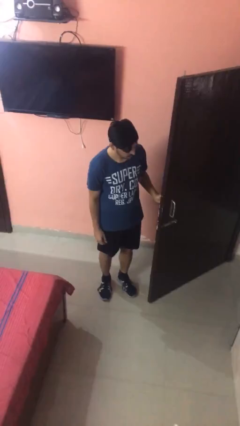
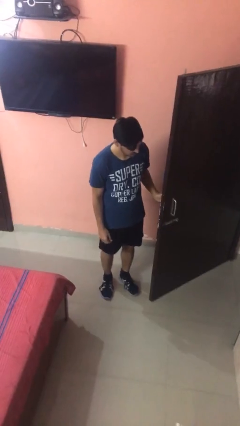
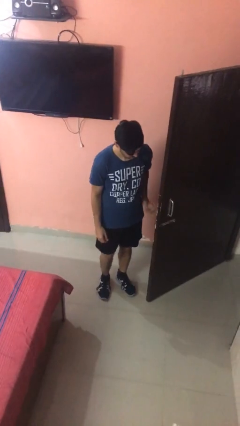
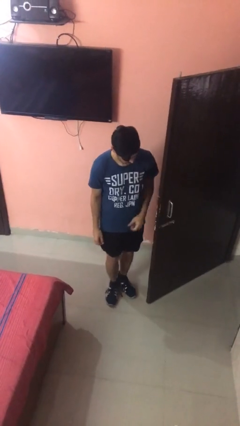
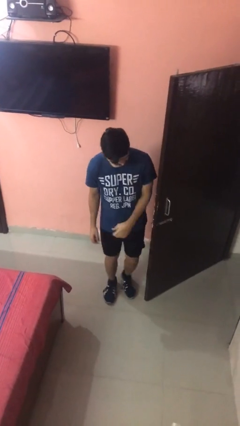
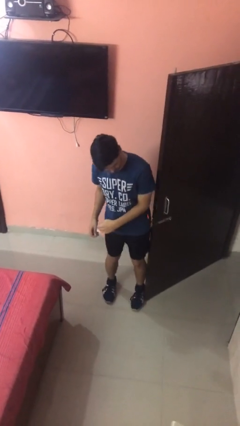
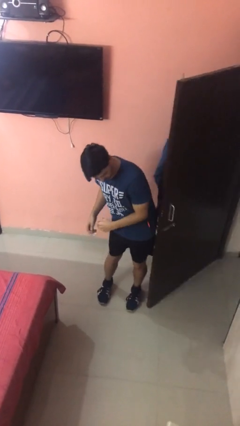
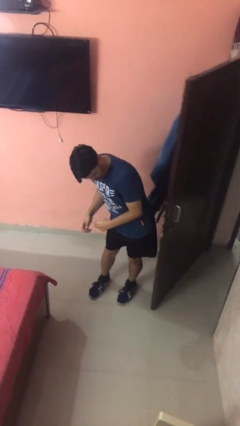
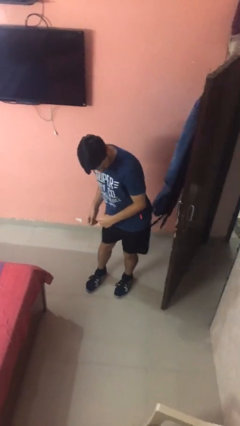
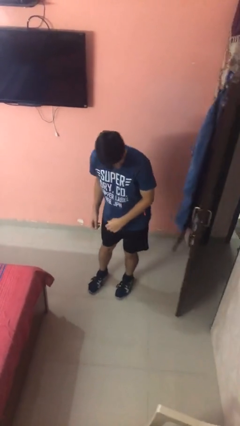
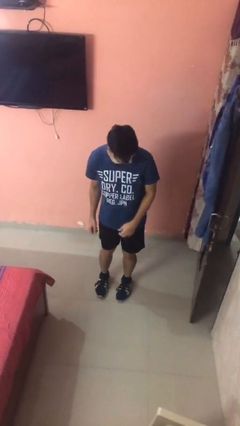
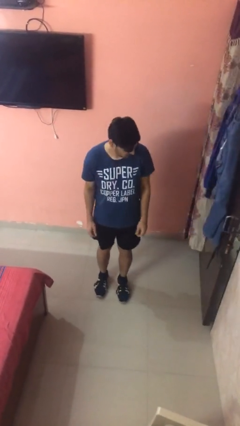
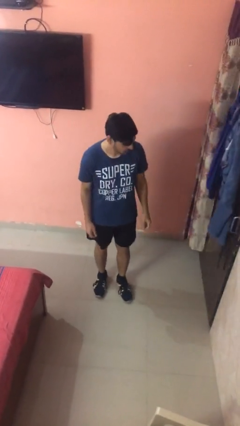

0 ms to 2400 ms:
person closes door with hip

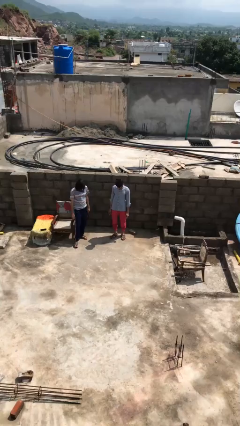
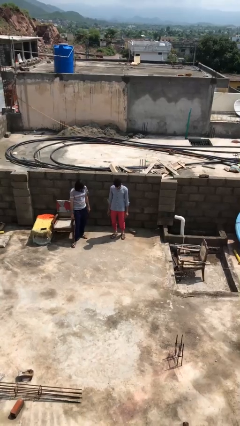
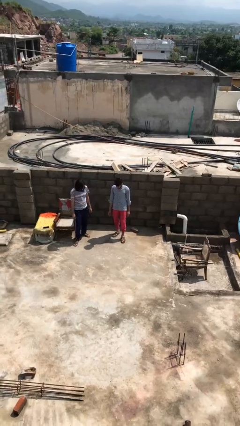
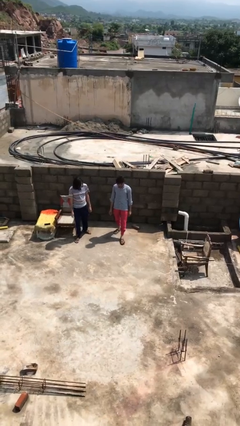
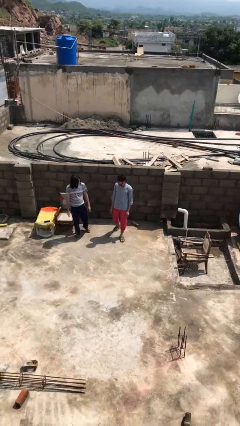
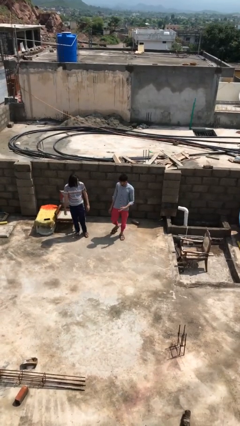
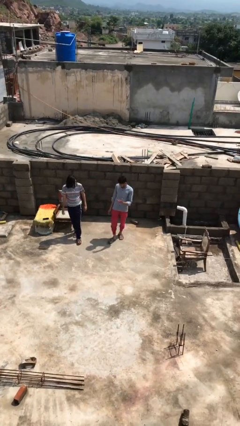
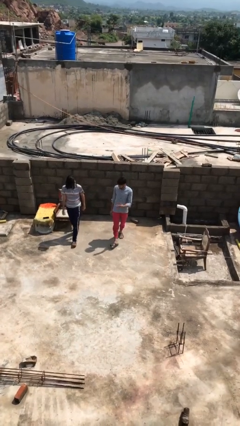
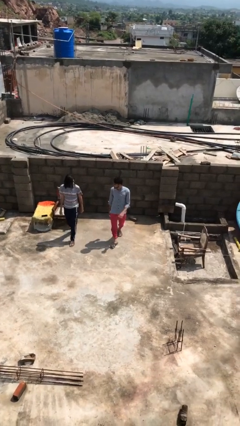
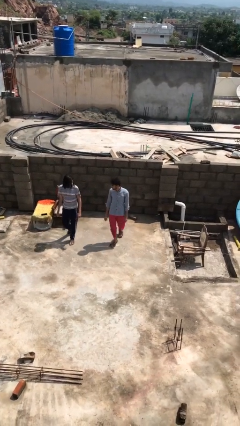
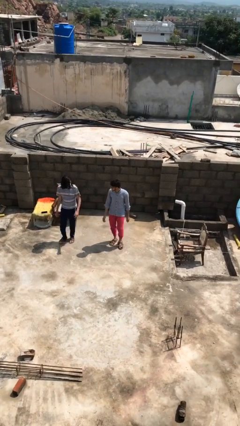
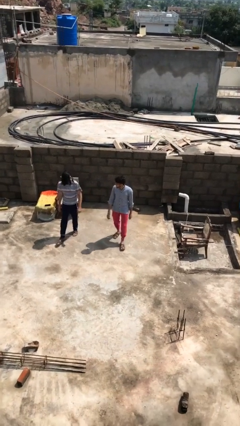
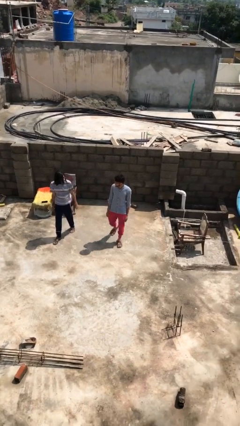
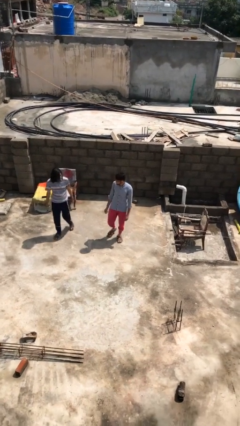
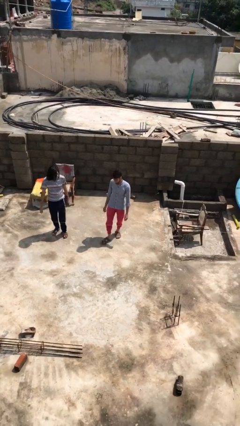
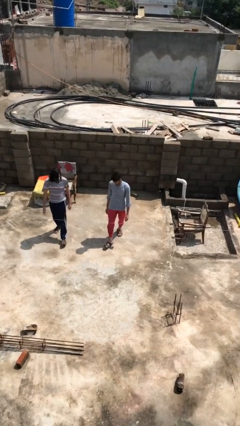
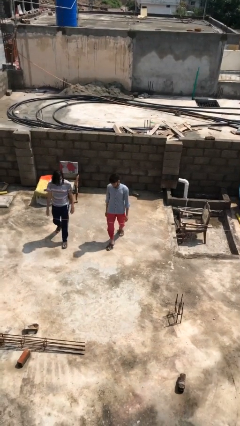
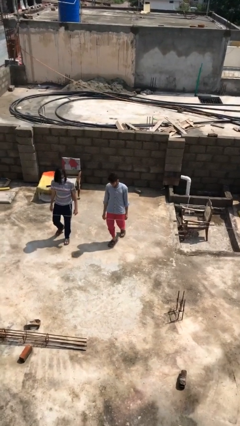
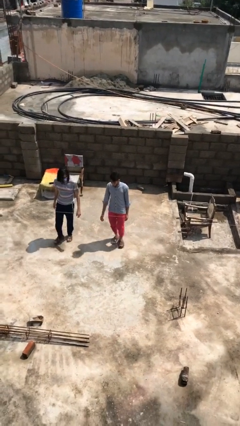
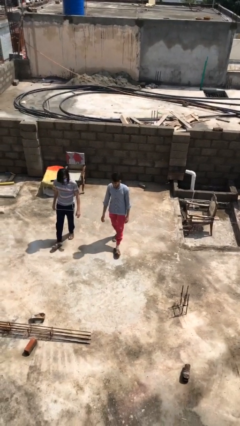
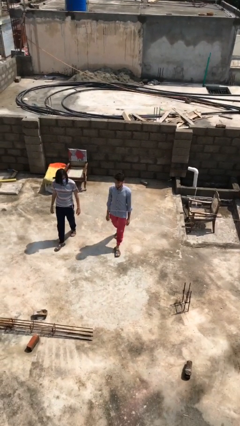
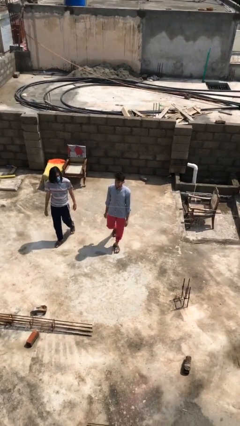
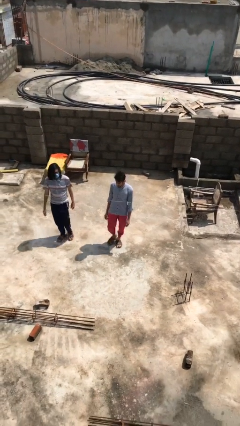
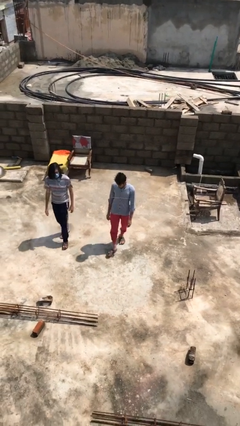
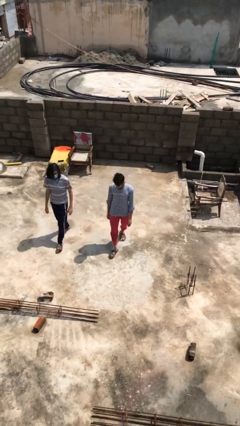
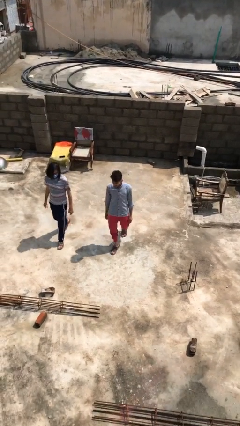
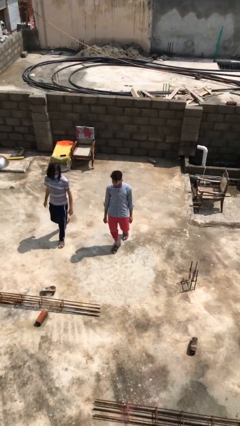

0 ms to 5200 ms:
person talks to person

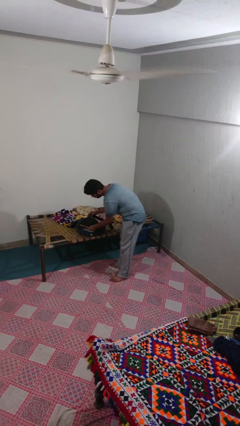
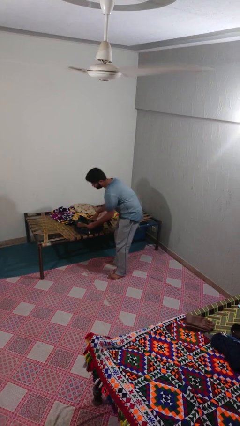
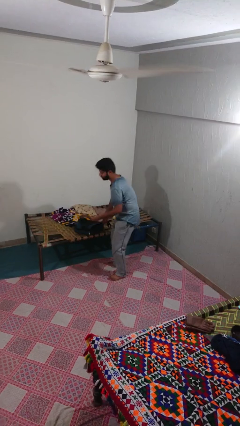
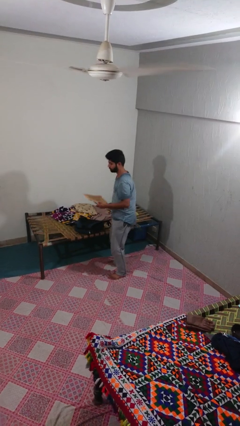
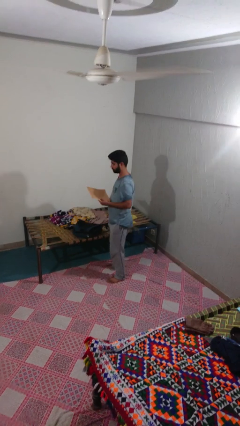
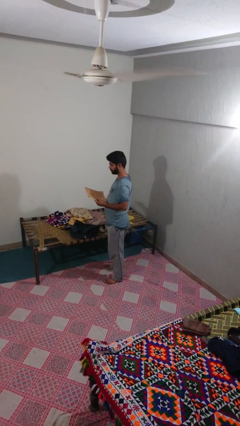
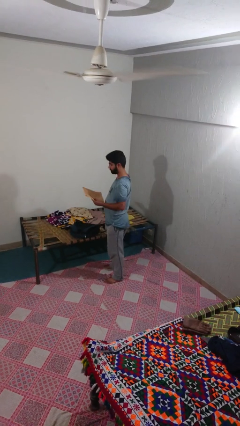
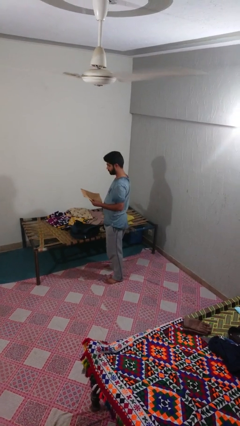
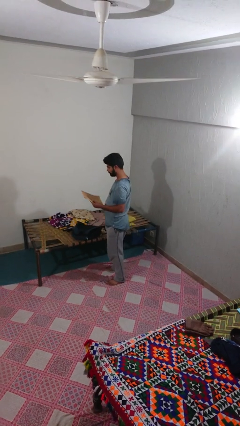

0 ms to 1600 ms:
person takes object from backpack

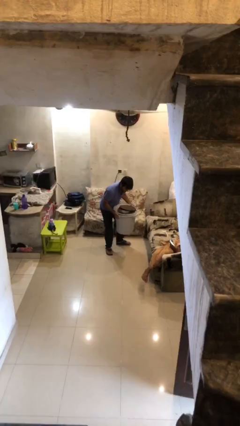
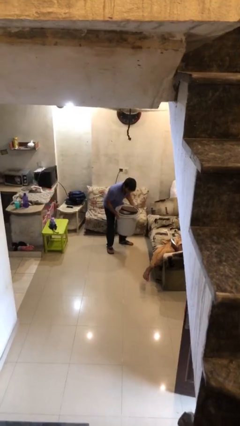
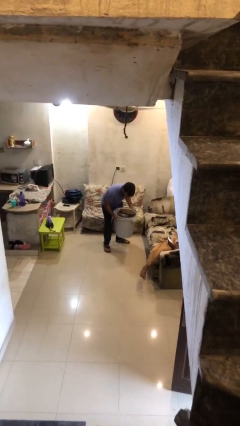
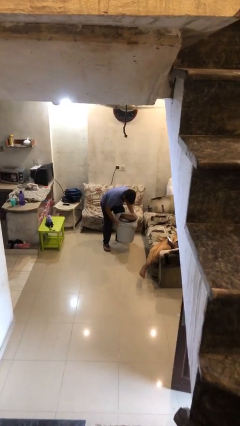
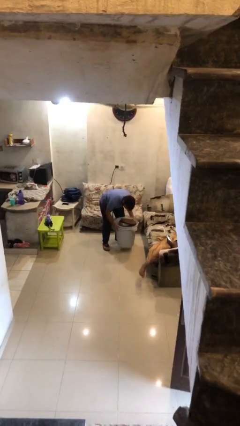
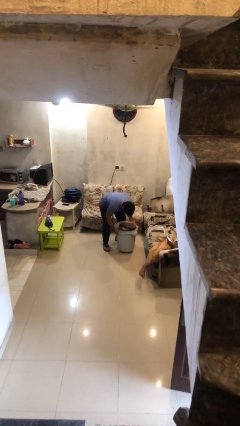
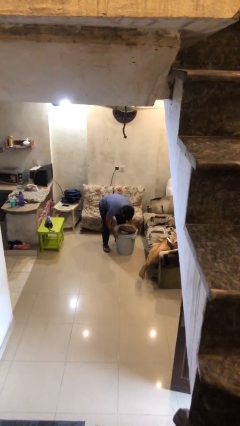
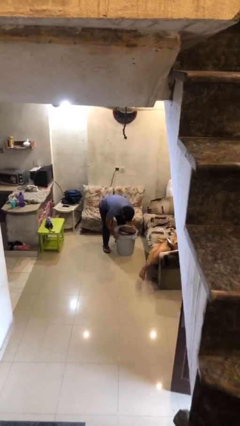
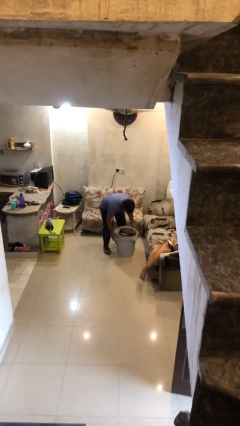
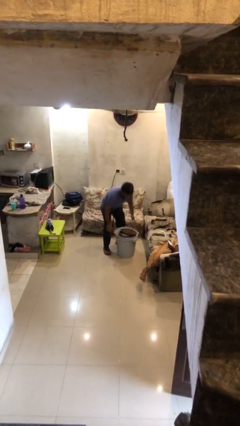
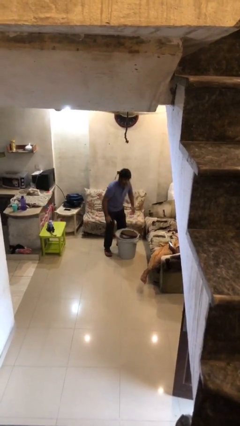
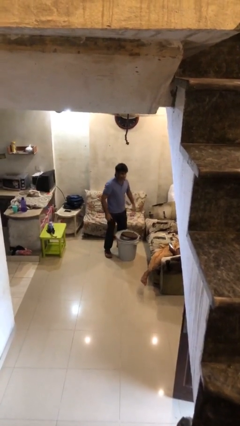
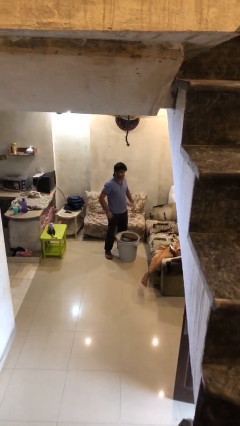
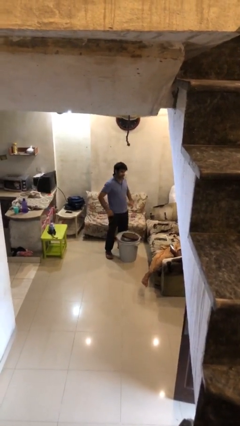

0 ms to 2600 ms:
person puts down object on floor

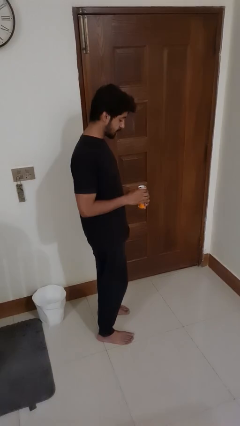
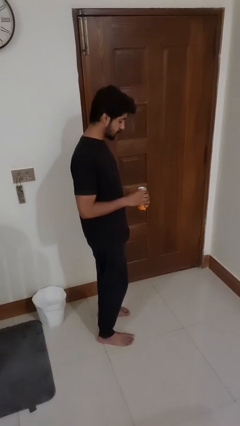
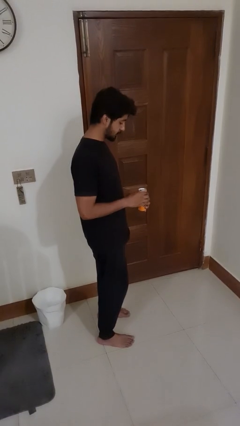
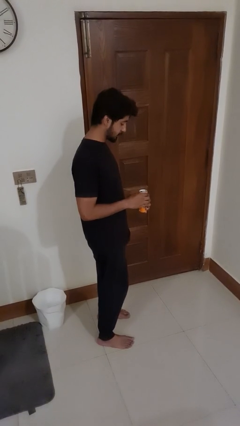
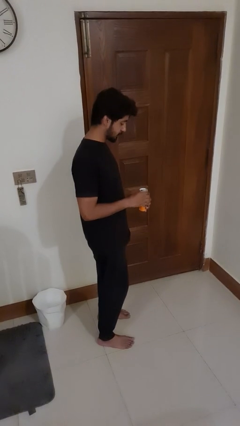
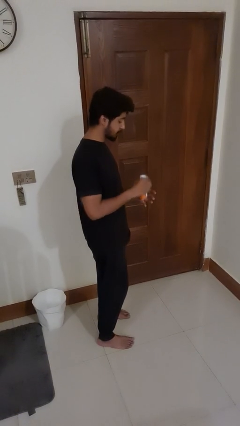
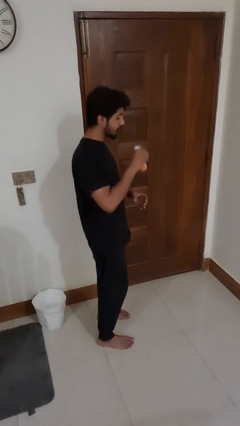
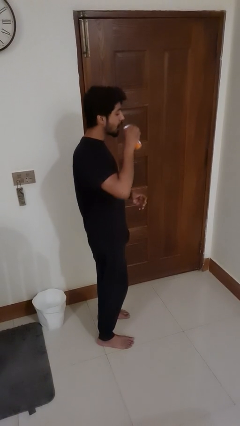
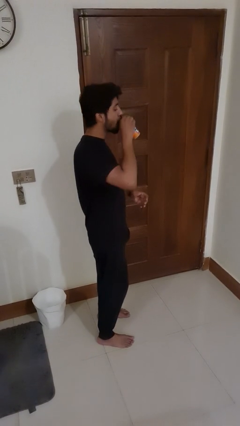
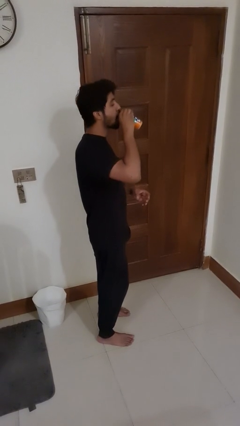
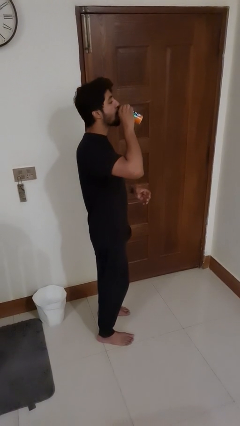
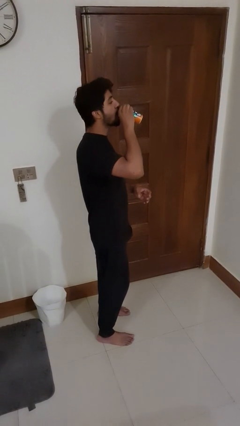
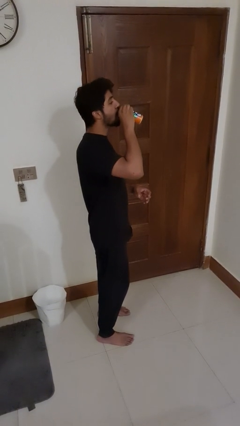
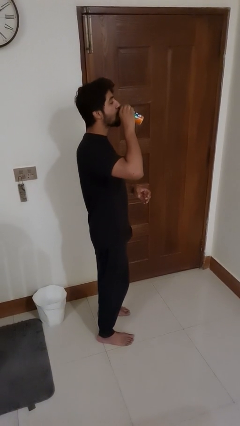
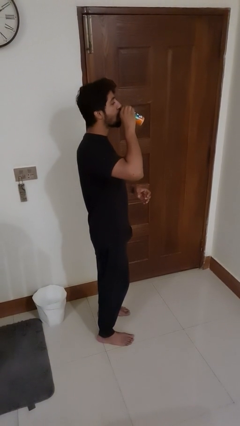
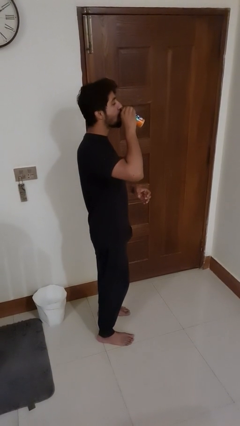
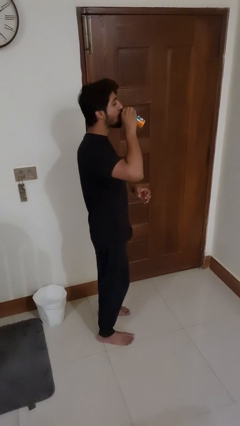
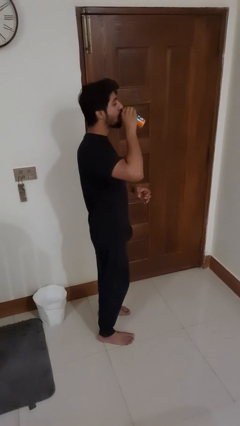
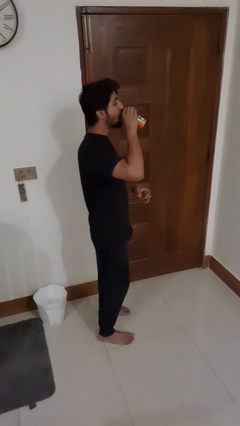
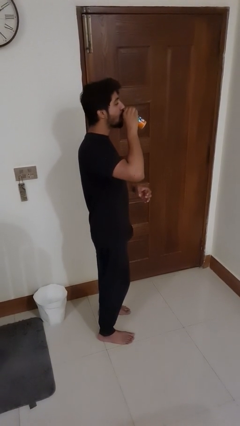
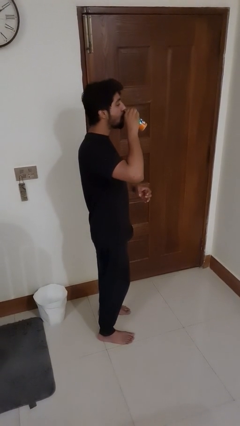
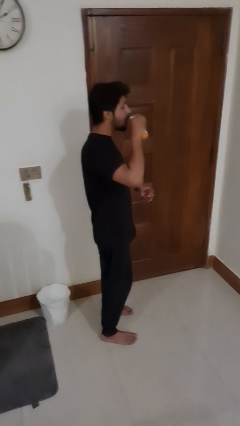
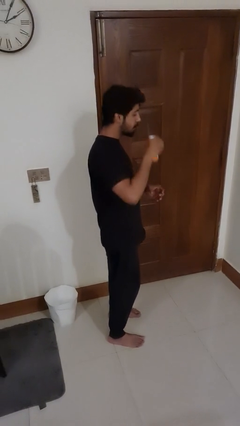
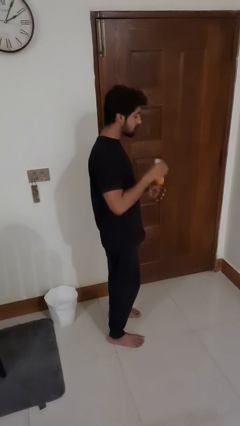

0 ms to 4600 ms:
person drinks from beverage can

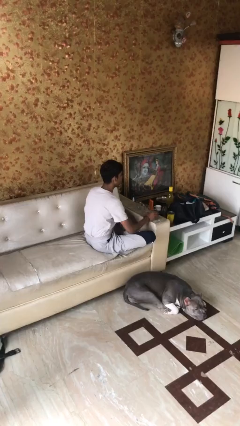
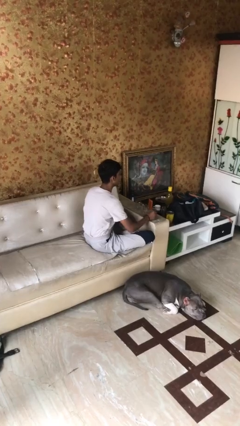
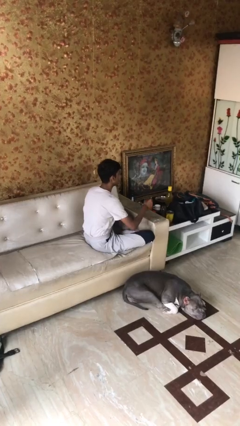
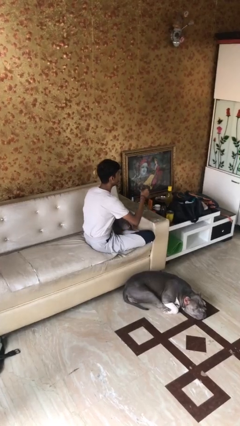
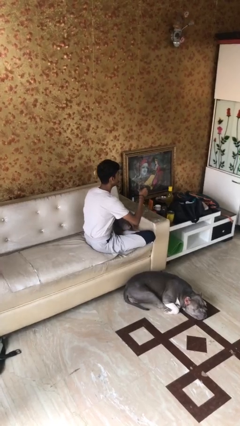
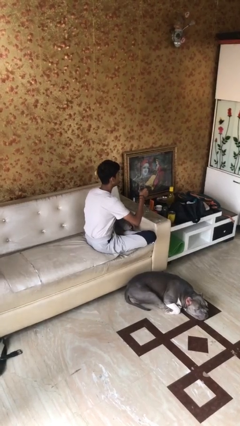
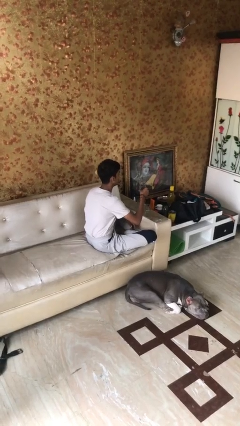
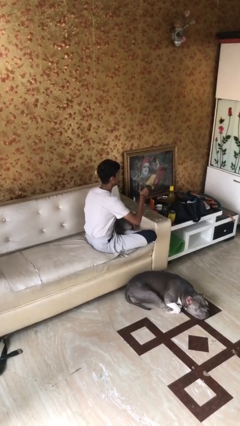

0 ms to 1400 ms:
person picks up object from table
